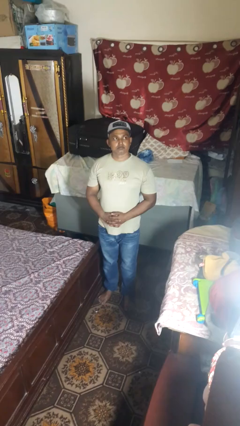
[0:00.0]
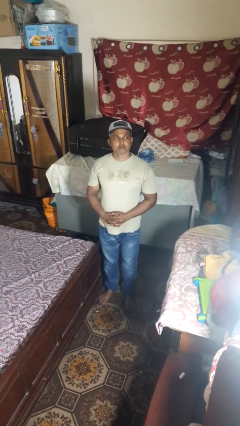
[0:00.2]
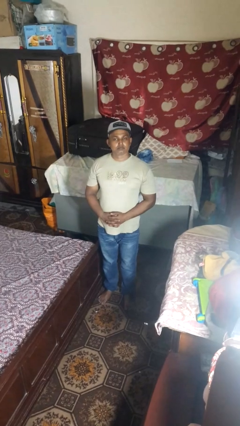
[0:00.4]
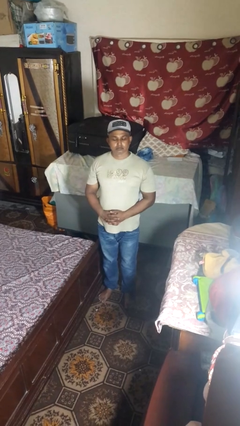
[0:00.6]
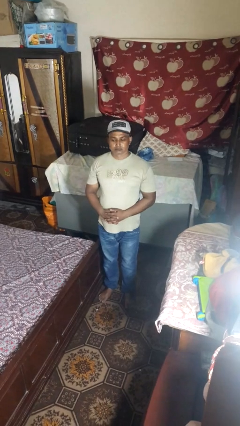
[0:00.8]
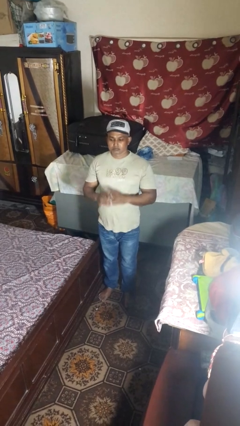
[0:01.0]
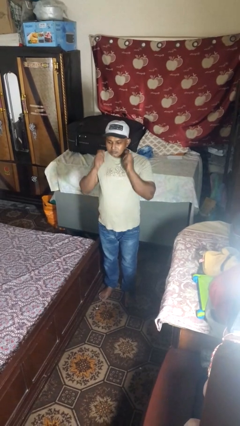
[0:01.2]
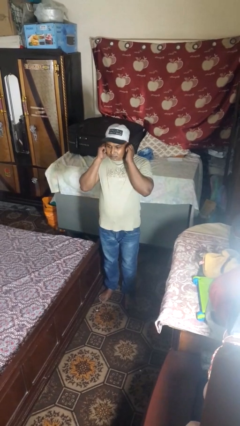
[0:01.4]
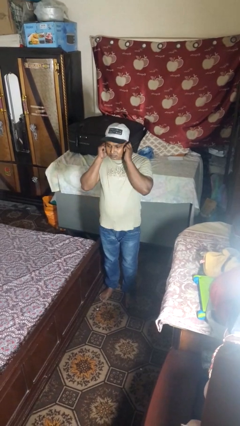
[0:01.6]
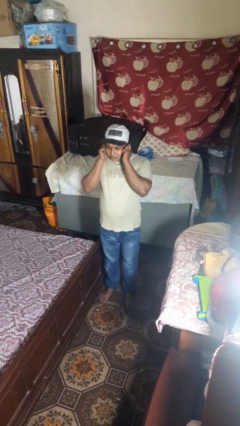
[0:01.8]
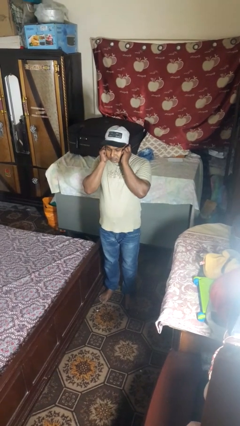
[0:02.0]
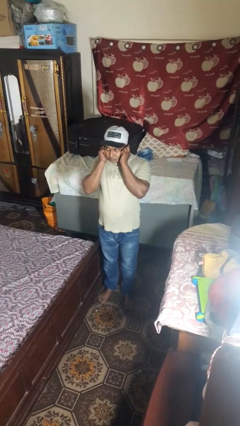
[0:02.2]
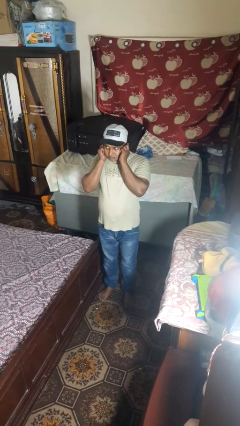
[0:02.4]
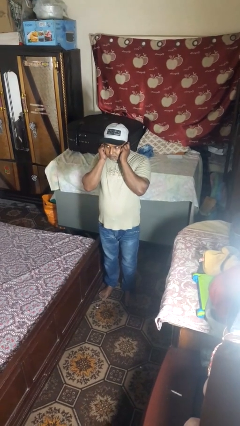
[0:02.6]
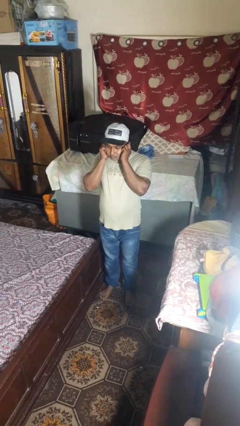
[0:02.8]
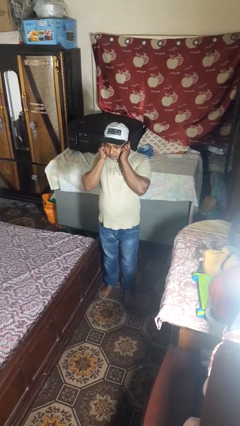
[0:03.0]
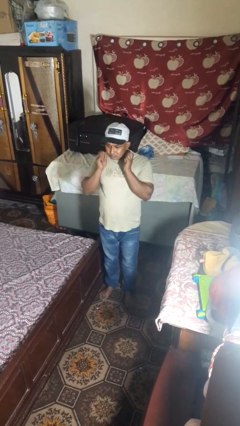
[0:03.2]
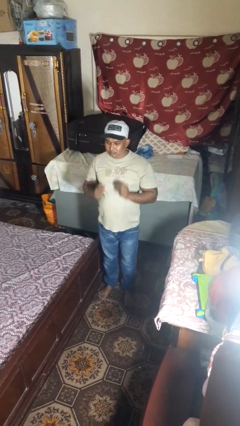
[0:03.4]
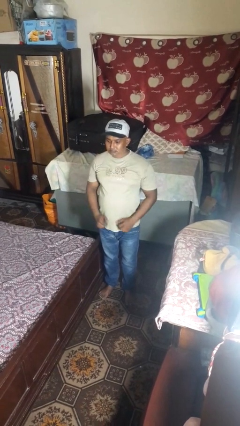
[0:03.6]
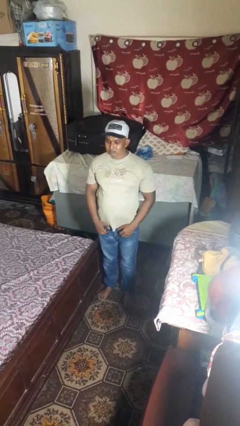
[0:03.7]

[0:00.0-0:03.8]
person puts fingers in ear

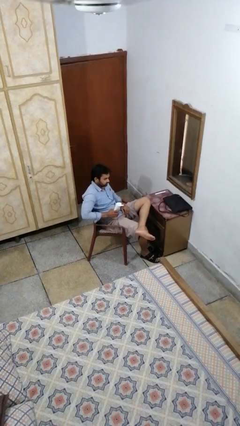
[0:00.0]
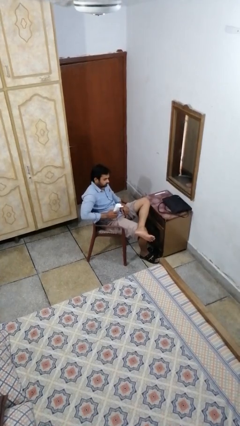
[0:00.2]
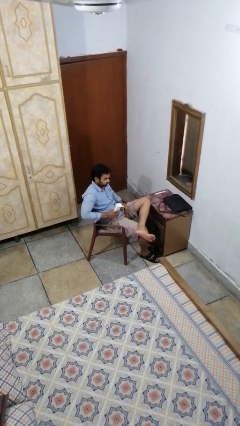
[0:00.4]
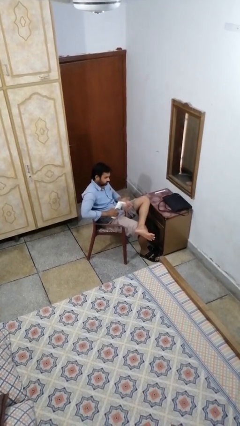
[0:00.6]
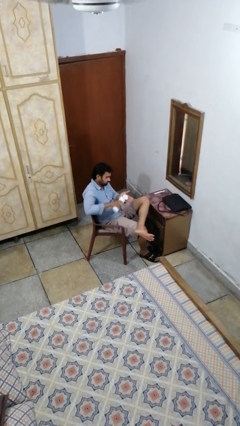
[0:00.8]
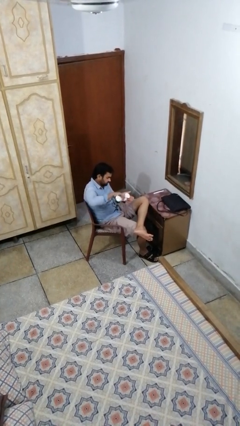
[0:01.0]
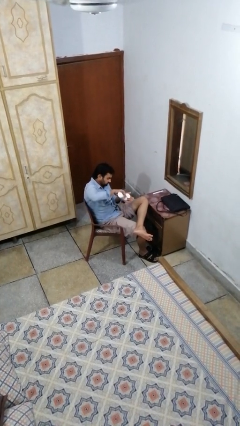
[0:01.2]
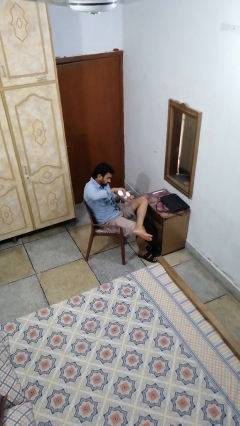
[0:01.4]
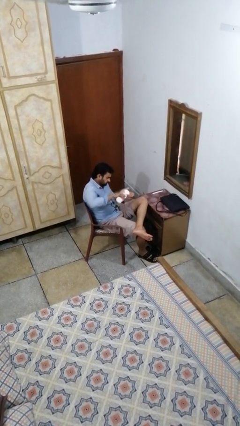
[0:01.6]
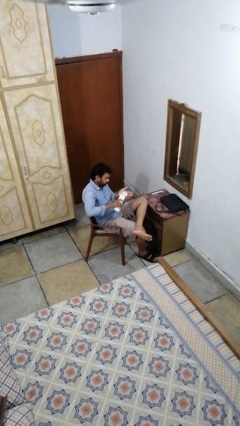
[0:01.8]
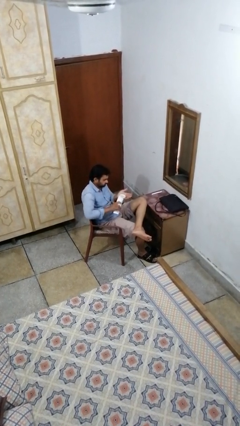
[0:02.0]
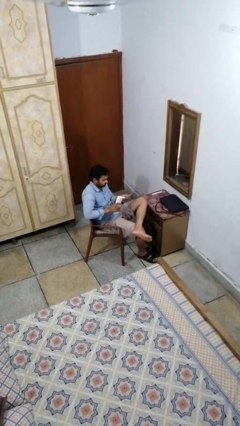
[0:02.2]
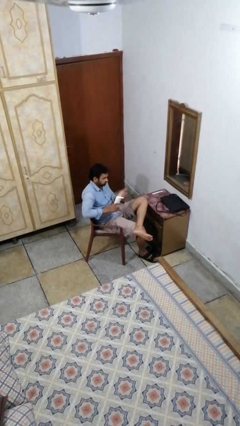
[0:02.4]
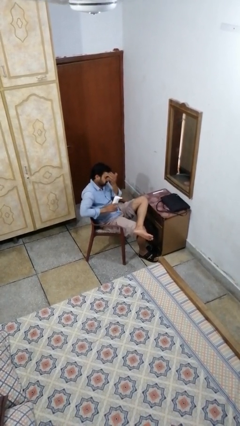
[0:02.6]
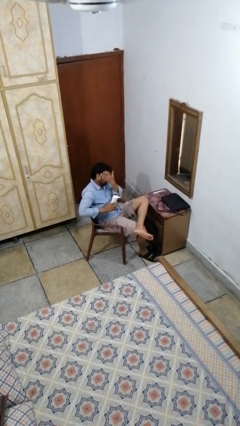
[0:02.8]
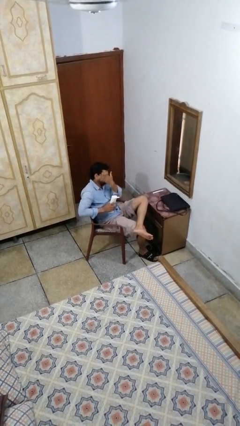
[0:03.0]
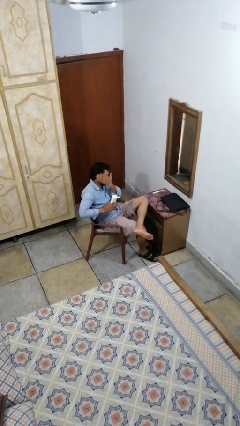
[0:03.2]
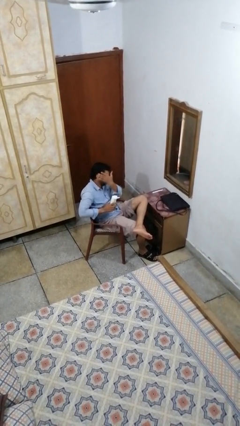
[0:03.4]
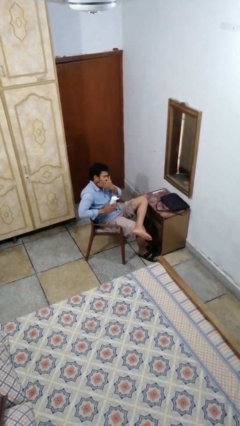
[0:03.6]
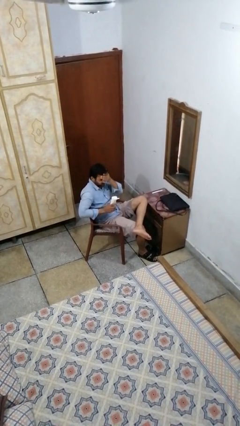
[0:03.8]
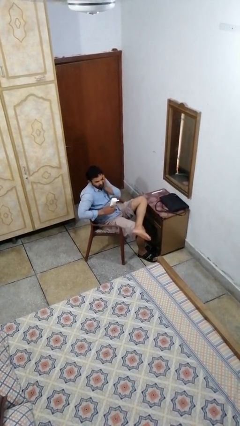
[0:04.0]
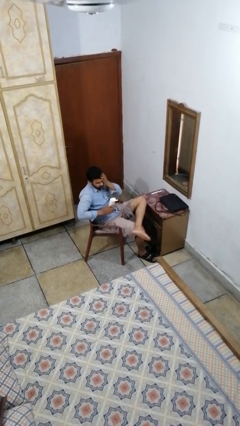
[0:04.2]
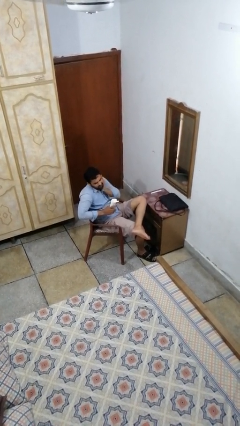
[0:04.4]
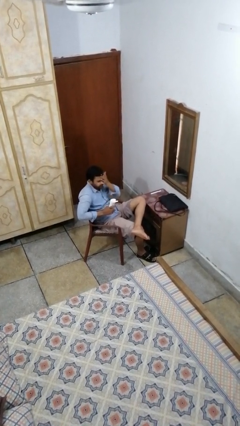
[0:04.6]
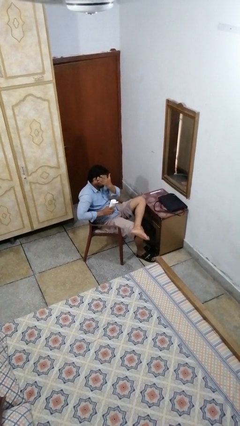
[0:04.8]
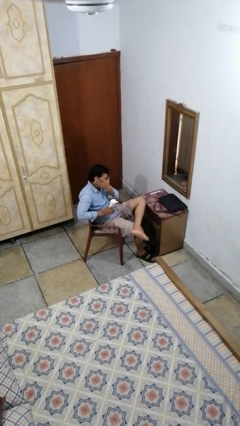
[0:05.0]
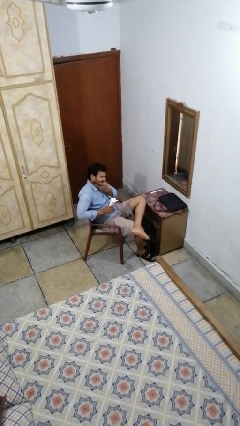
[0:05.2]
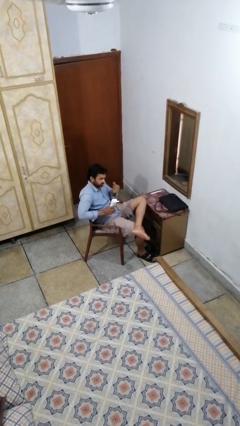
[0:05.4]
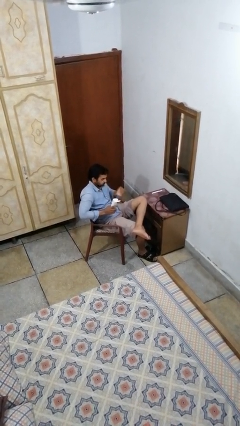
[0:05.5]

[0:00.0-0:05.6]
person applies sunscreen

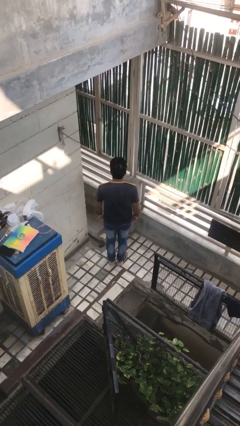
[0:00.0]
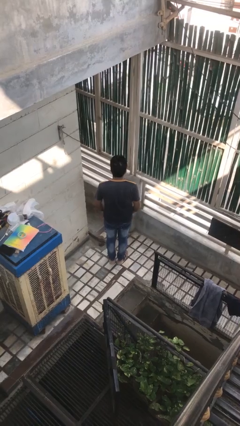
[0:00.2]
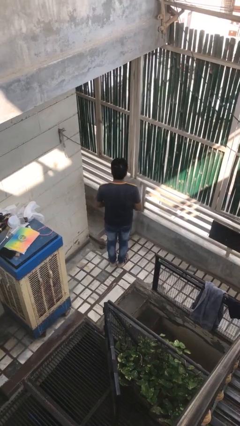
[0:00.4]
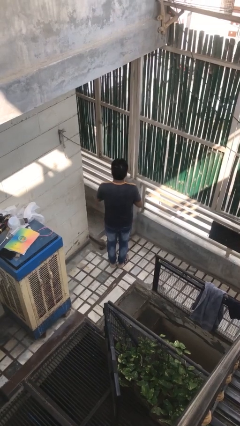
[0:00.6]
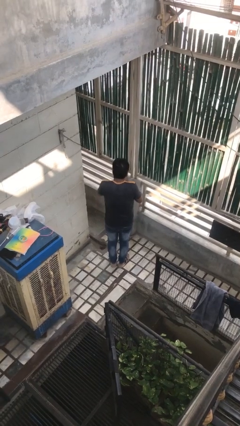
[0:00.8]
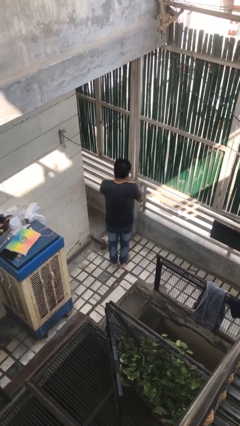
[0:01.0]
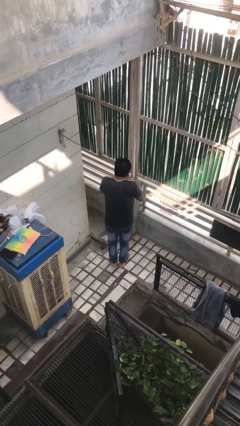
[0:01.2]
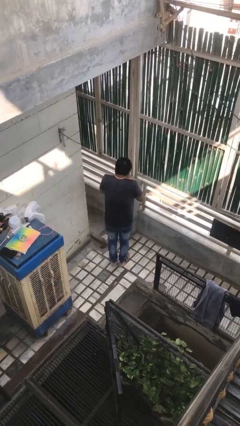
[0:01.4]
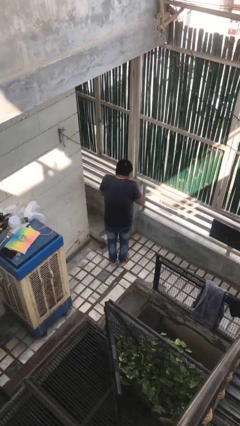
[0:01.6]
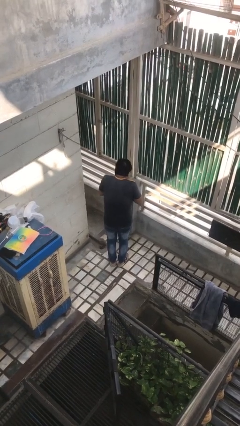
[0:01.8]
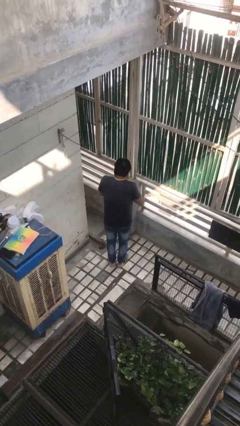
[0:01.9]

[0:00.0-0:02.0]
person sneezes into hand

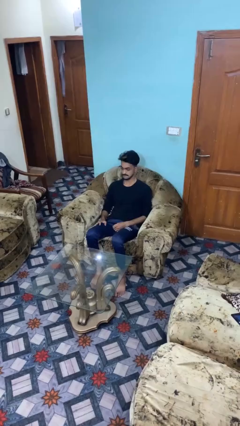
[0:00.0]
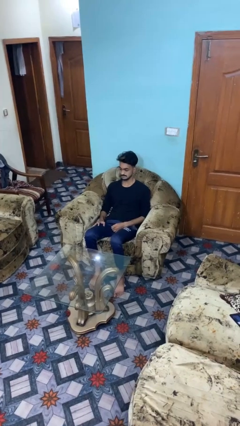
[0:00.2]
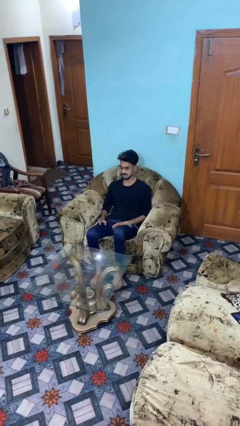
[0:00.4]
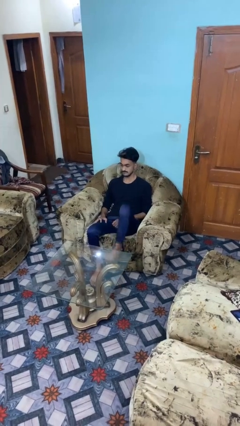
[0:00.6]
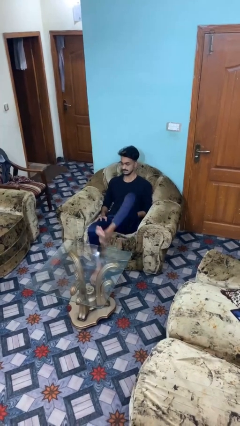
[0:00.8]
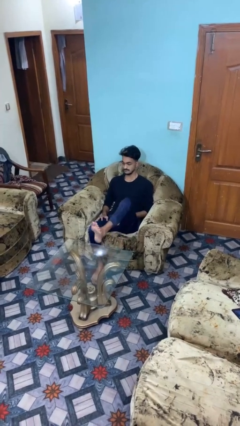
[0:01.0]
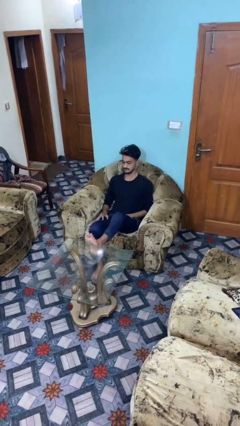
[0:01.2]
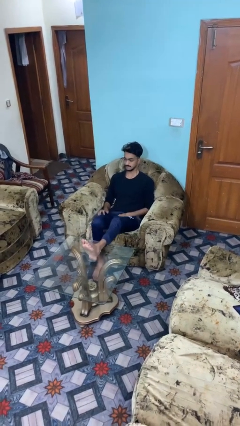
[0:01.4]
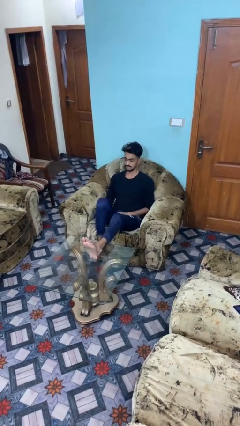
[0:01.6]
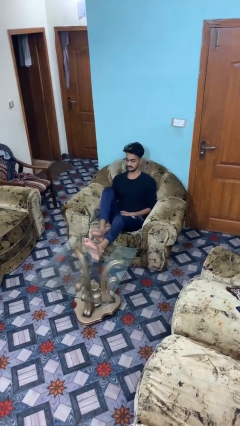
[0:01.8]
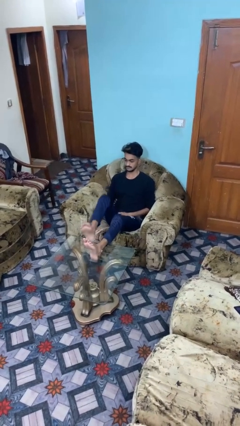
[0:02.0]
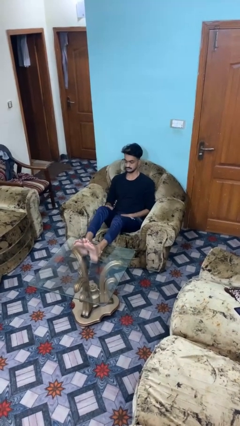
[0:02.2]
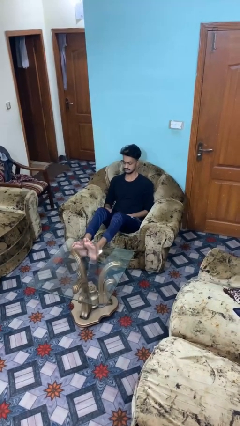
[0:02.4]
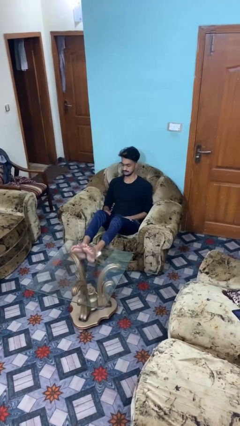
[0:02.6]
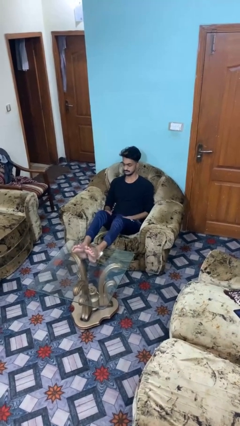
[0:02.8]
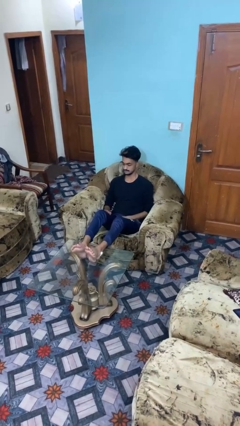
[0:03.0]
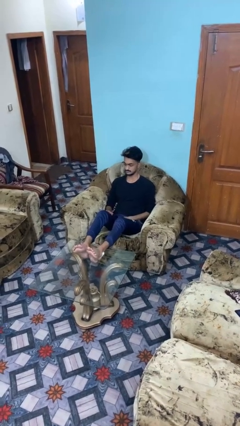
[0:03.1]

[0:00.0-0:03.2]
person puts feet up

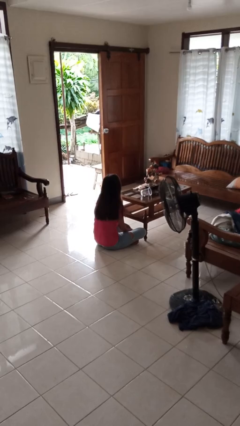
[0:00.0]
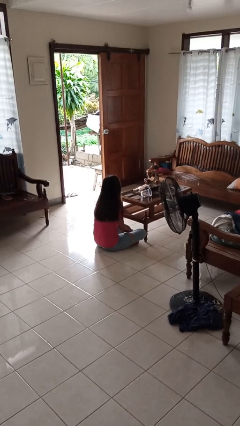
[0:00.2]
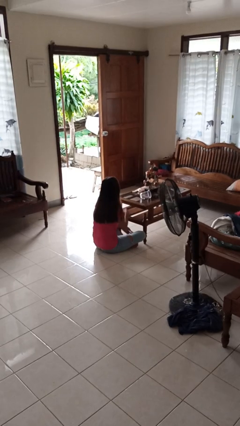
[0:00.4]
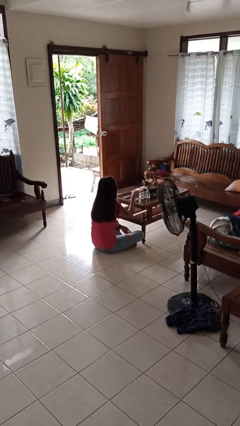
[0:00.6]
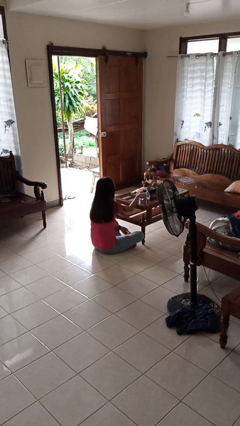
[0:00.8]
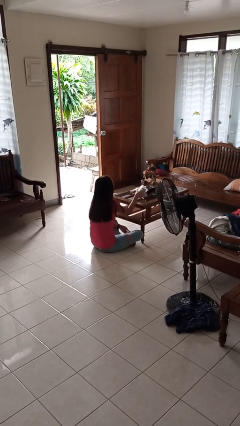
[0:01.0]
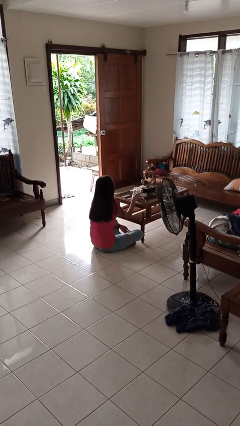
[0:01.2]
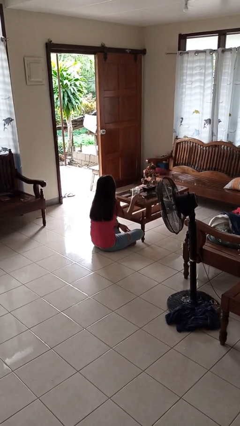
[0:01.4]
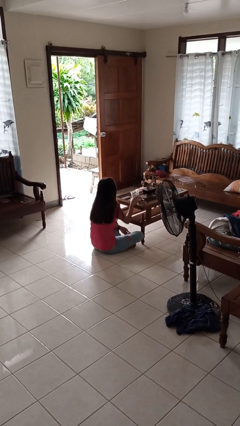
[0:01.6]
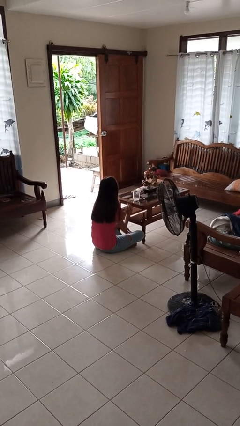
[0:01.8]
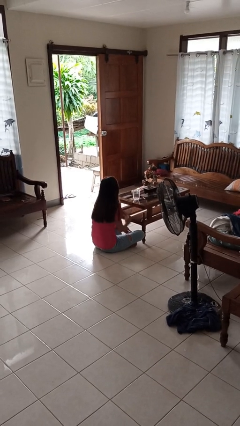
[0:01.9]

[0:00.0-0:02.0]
person sets upright glass

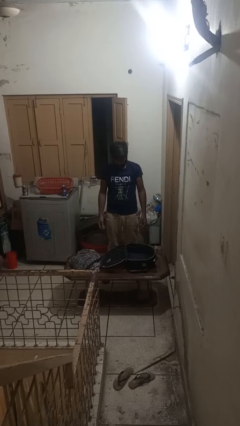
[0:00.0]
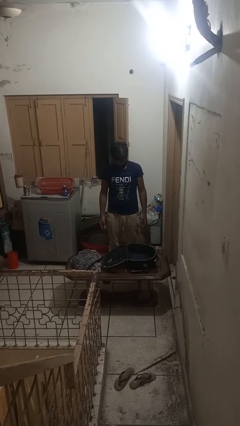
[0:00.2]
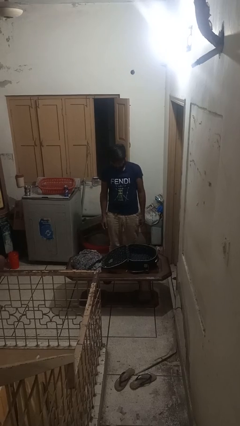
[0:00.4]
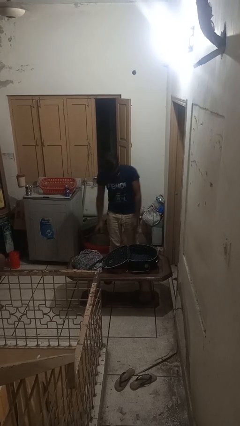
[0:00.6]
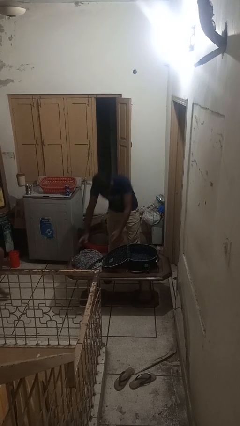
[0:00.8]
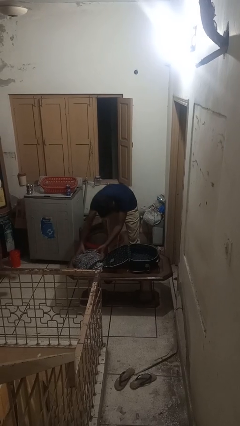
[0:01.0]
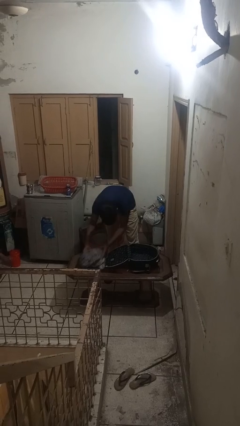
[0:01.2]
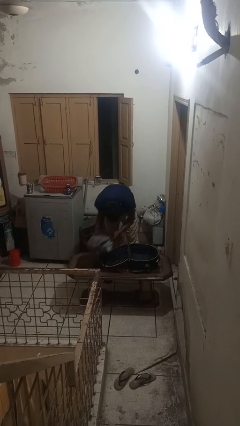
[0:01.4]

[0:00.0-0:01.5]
person loads clothes into suitcase
